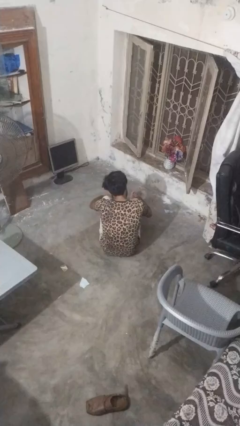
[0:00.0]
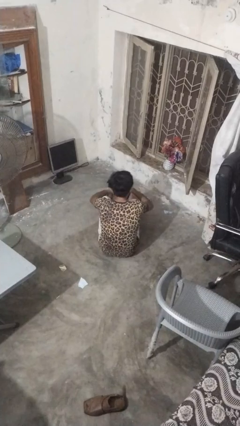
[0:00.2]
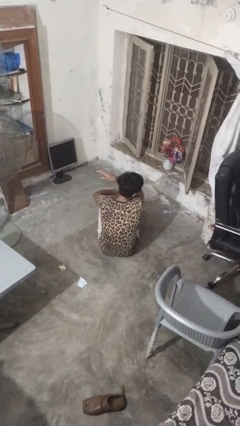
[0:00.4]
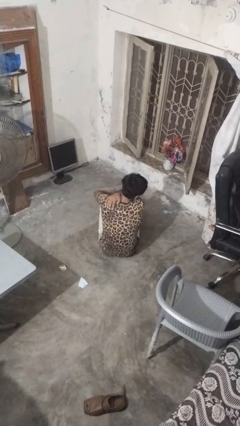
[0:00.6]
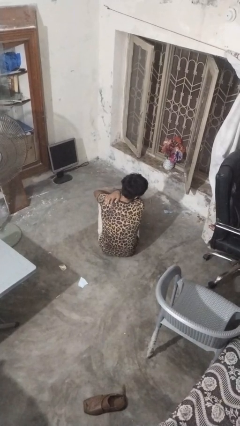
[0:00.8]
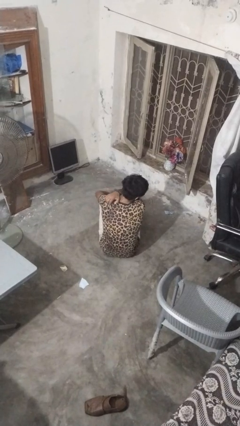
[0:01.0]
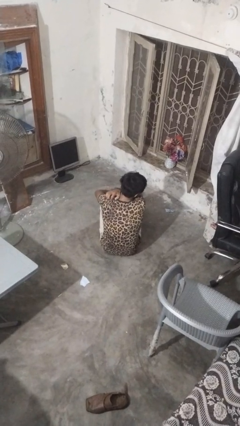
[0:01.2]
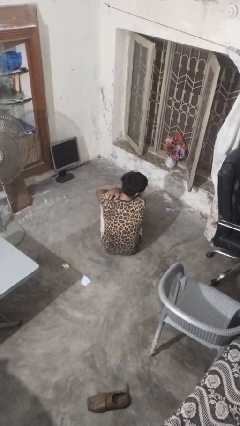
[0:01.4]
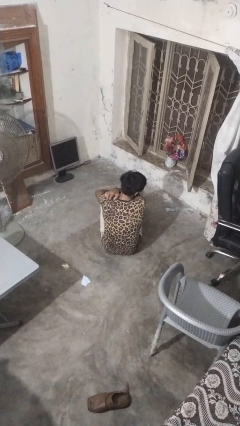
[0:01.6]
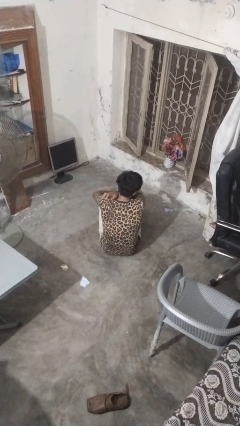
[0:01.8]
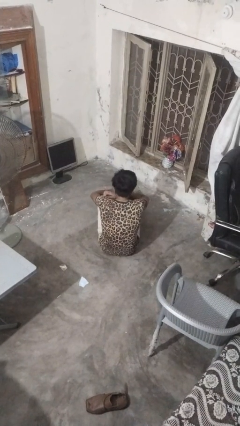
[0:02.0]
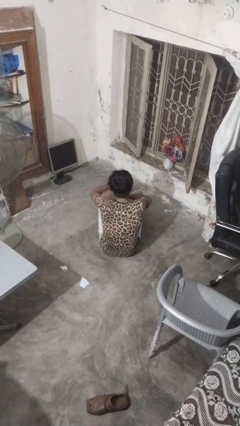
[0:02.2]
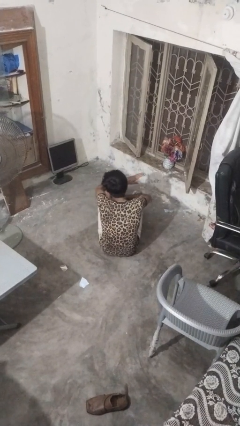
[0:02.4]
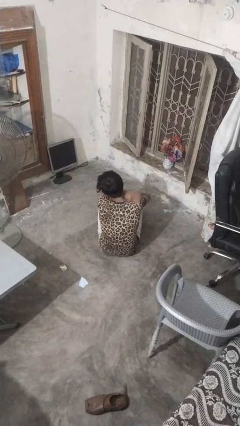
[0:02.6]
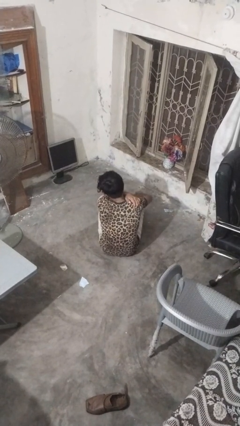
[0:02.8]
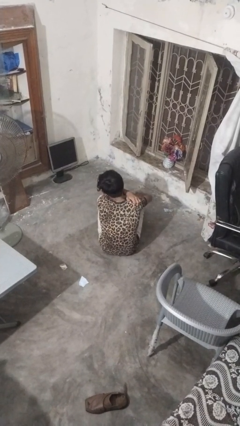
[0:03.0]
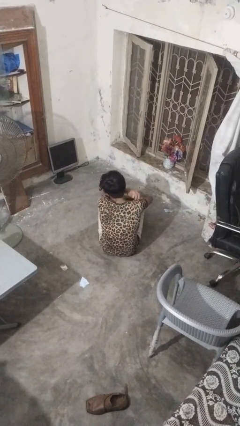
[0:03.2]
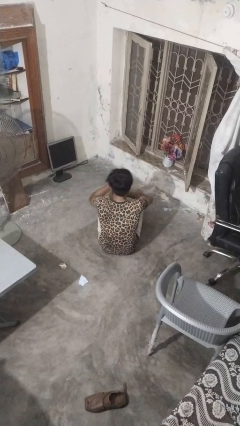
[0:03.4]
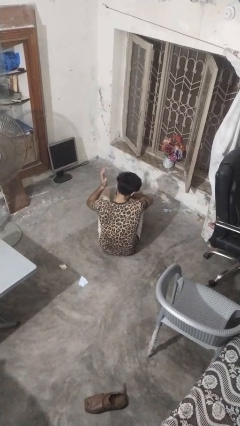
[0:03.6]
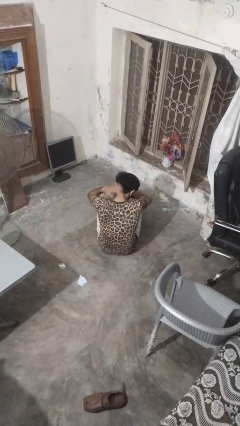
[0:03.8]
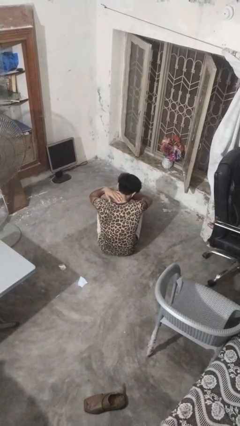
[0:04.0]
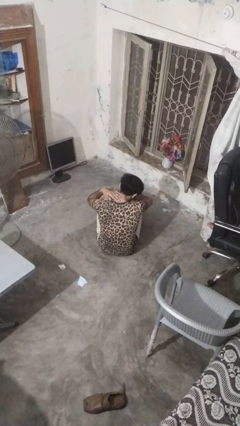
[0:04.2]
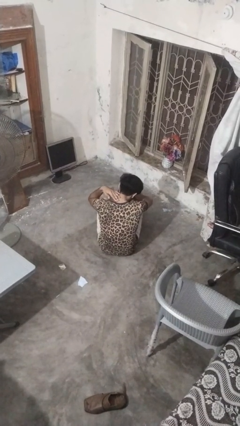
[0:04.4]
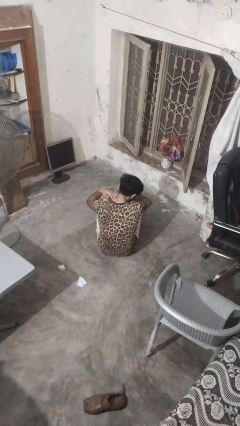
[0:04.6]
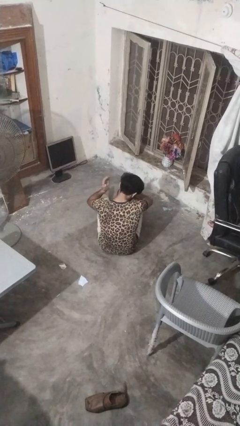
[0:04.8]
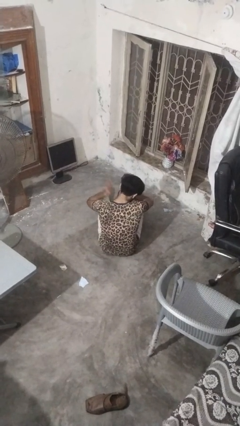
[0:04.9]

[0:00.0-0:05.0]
person swats bug

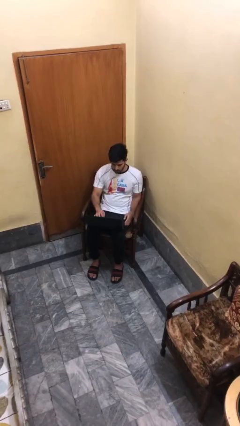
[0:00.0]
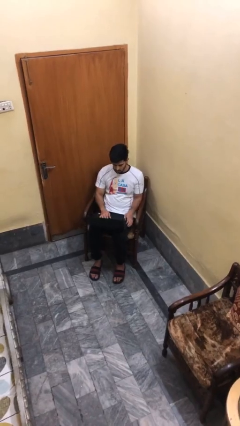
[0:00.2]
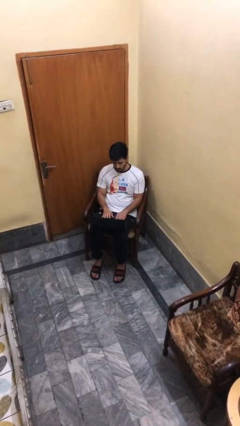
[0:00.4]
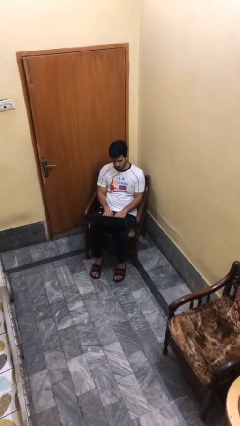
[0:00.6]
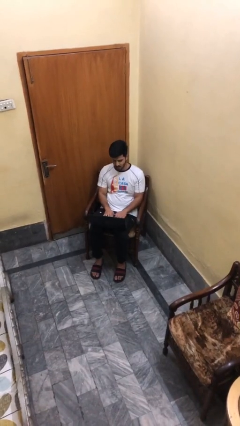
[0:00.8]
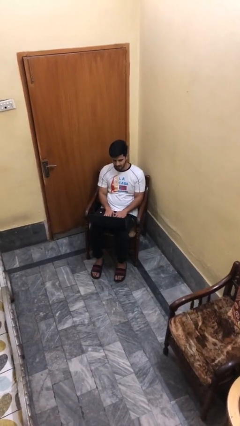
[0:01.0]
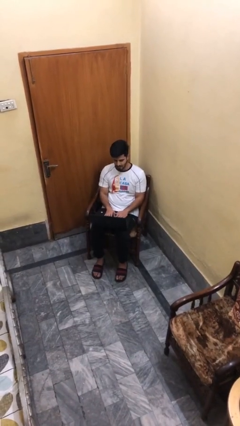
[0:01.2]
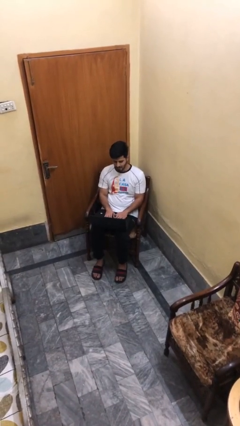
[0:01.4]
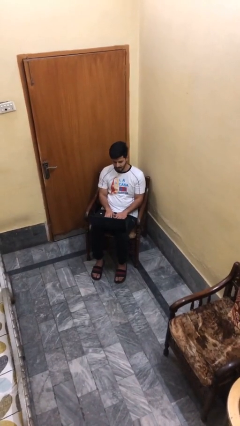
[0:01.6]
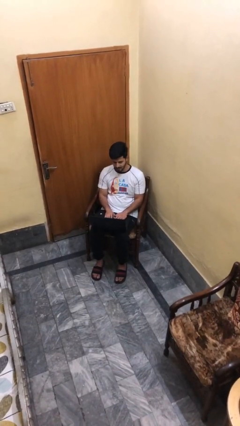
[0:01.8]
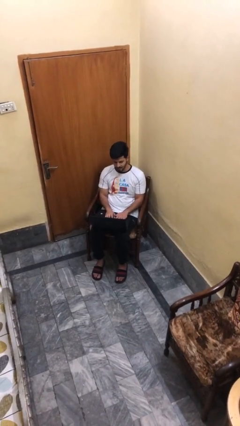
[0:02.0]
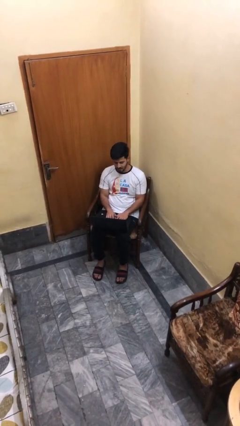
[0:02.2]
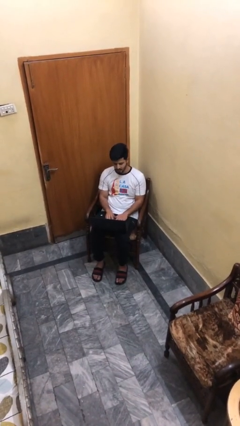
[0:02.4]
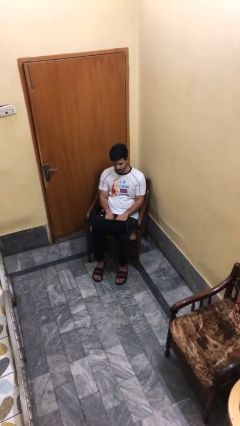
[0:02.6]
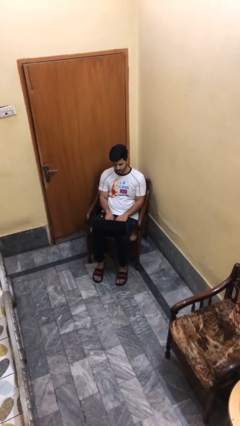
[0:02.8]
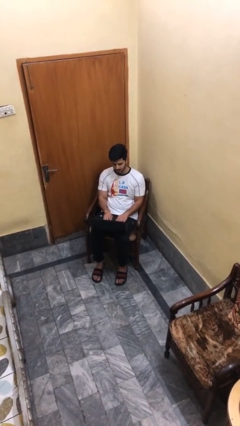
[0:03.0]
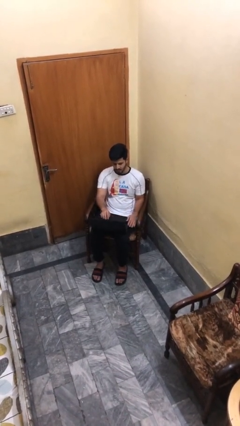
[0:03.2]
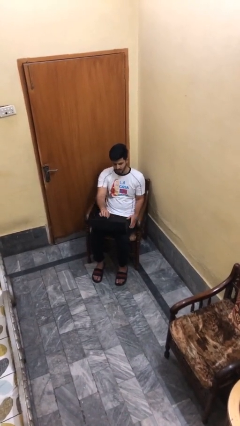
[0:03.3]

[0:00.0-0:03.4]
person interacts with laptop

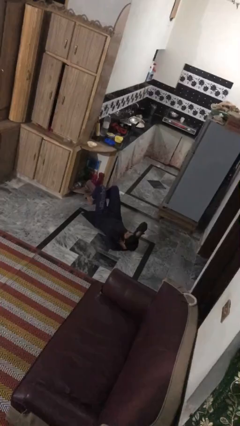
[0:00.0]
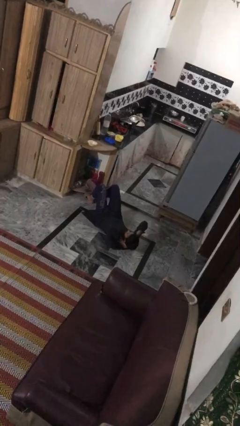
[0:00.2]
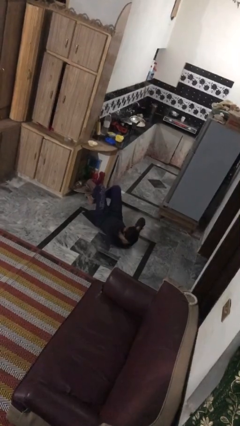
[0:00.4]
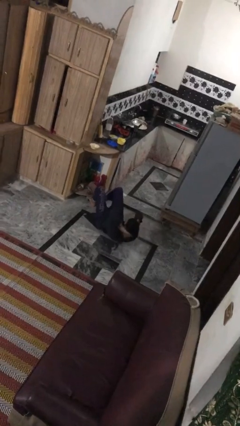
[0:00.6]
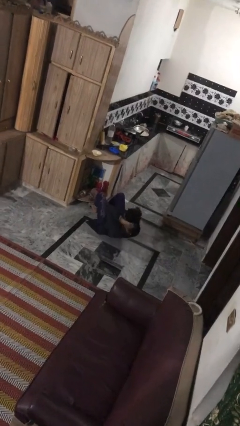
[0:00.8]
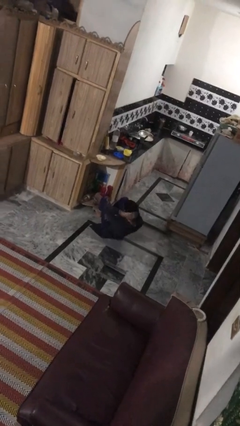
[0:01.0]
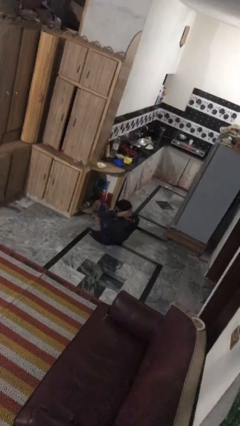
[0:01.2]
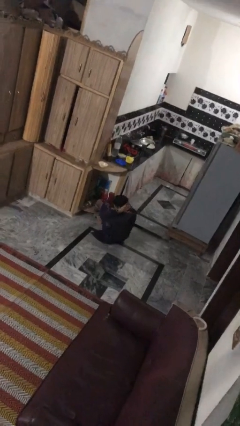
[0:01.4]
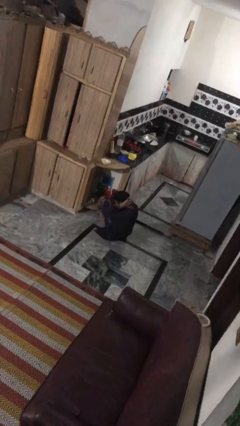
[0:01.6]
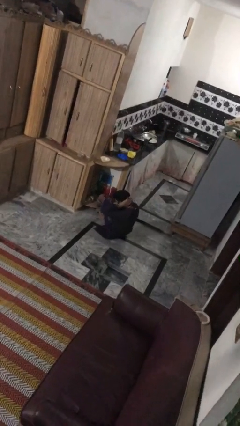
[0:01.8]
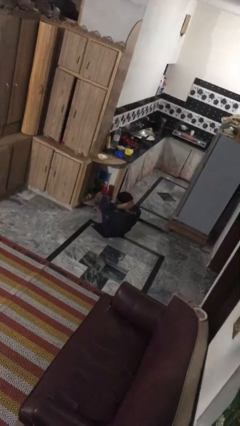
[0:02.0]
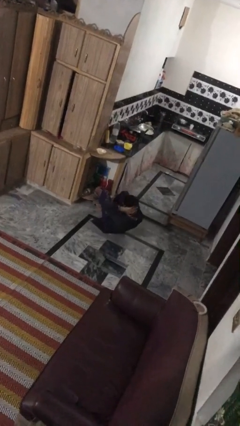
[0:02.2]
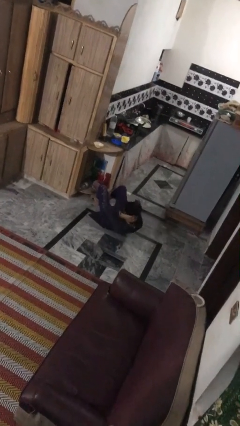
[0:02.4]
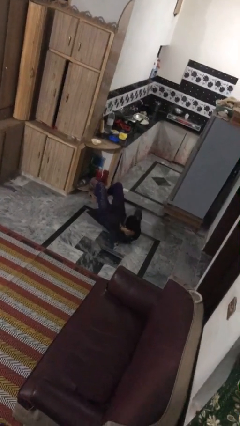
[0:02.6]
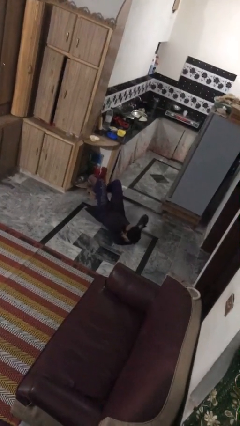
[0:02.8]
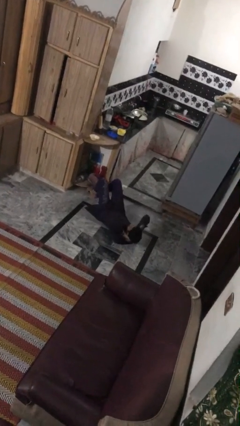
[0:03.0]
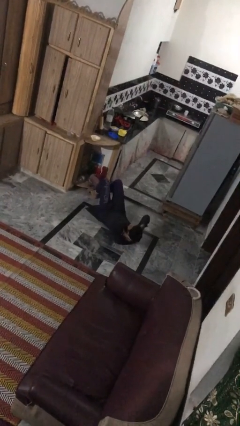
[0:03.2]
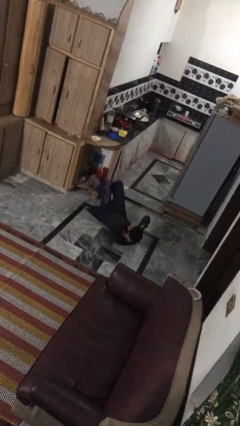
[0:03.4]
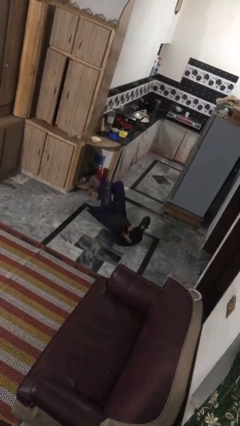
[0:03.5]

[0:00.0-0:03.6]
person exercises with situp

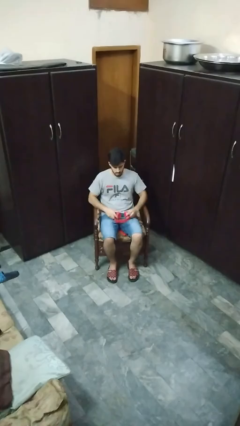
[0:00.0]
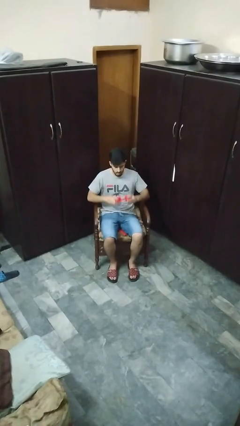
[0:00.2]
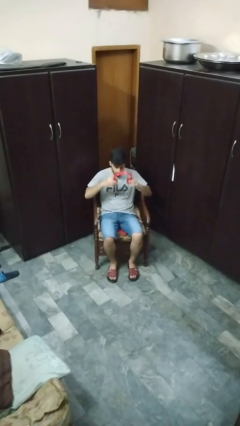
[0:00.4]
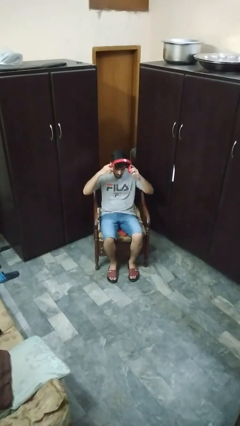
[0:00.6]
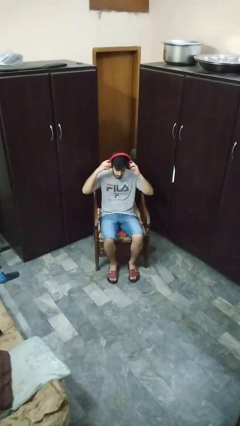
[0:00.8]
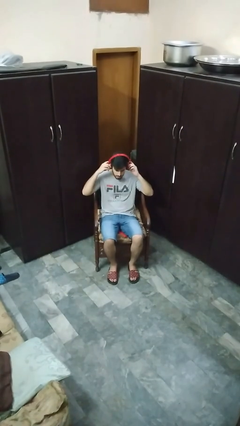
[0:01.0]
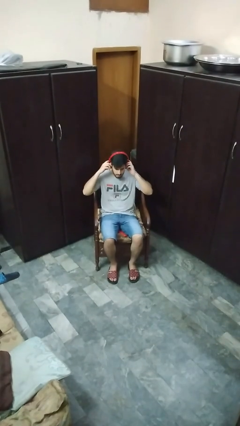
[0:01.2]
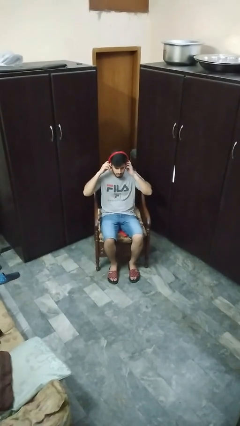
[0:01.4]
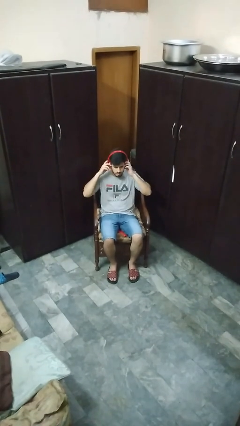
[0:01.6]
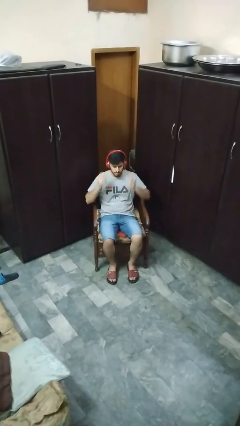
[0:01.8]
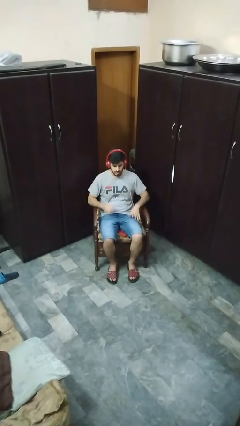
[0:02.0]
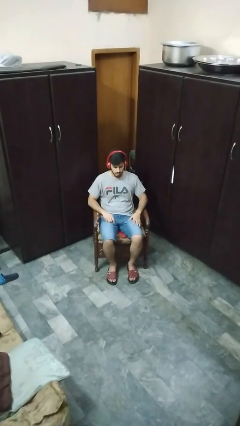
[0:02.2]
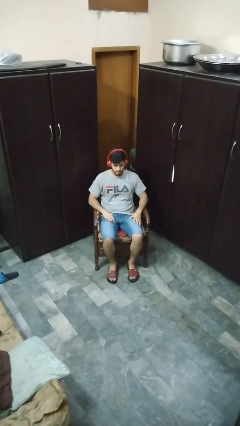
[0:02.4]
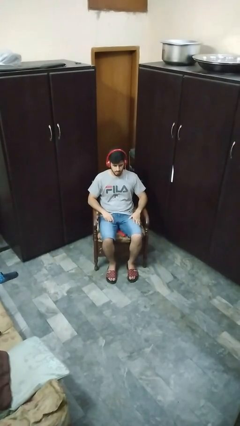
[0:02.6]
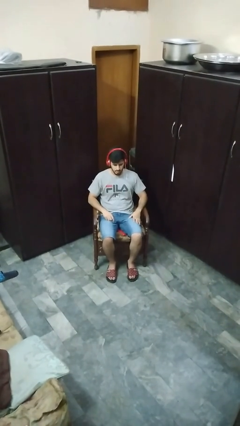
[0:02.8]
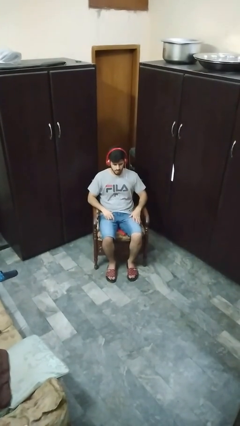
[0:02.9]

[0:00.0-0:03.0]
person puts on headphones

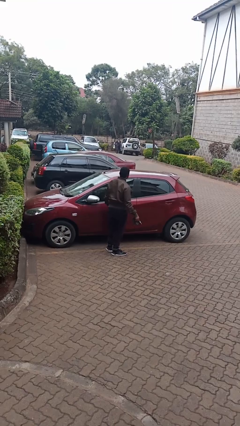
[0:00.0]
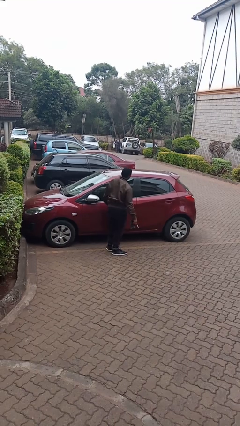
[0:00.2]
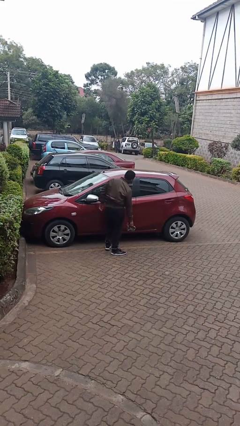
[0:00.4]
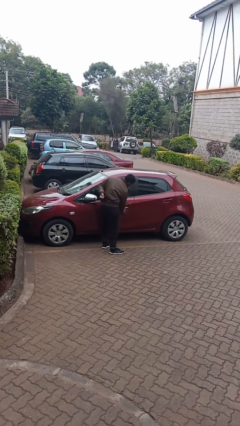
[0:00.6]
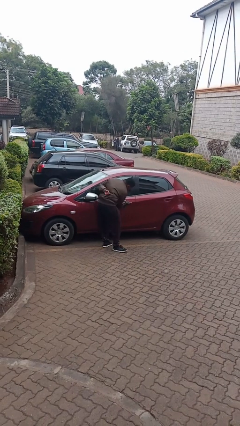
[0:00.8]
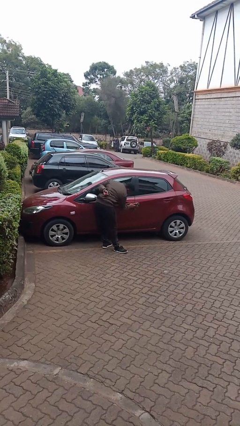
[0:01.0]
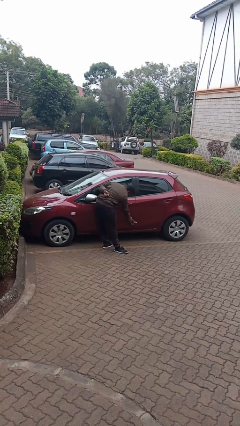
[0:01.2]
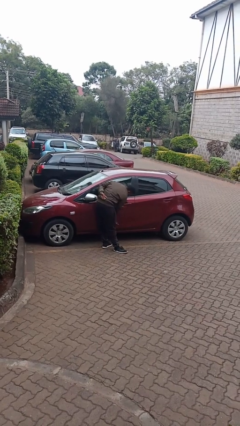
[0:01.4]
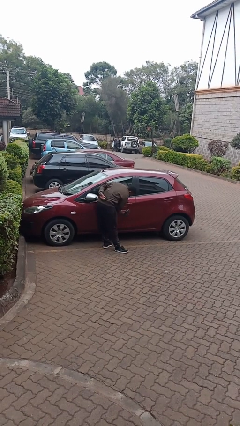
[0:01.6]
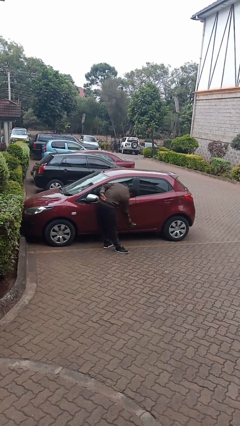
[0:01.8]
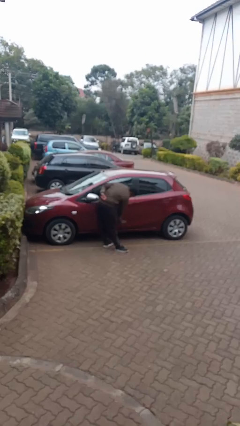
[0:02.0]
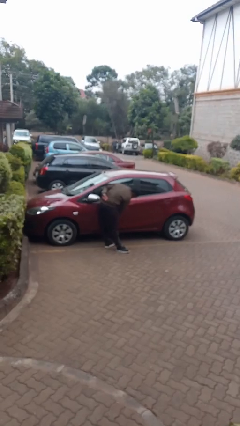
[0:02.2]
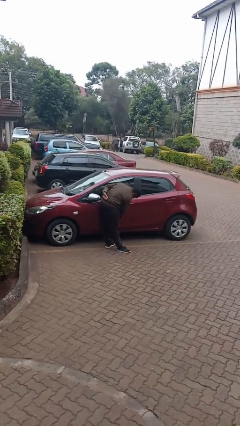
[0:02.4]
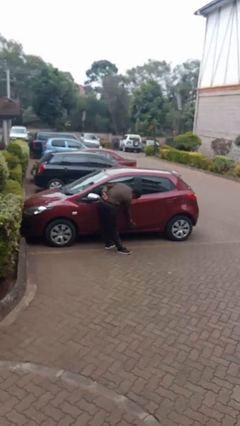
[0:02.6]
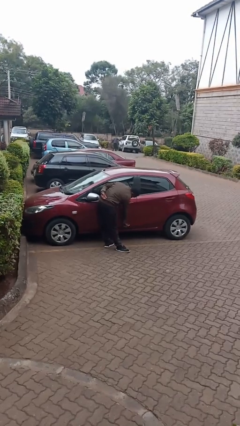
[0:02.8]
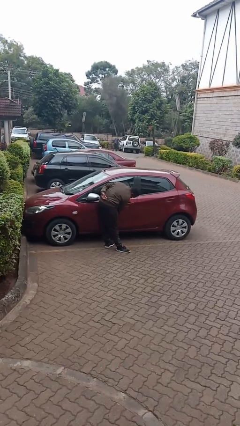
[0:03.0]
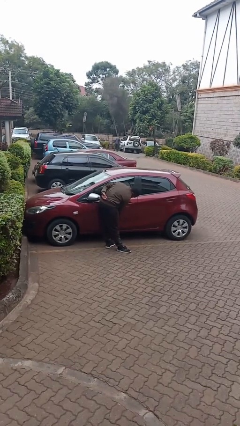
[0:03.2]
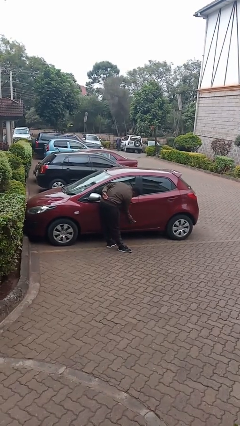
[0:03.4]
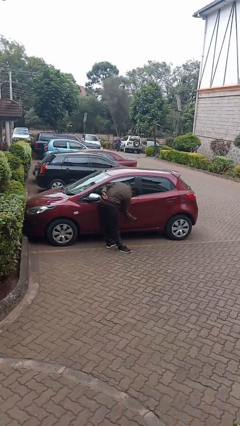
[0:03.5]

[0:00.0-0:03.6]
person polishes car with rag
